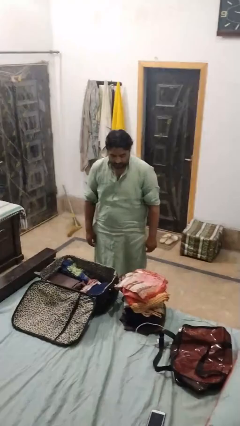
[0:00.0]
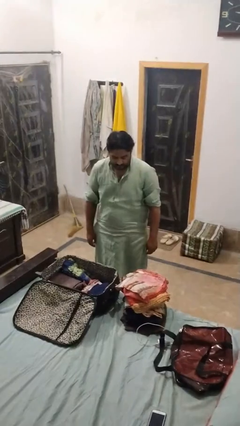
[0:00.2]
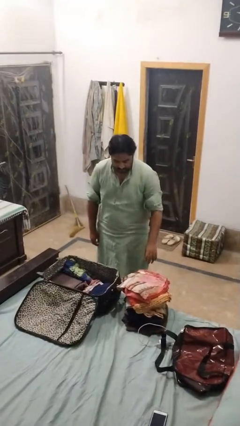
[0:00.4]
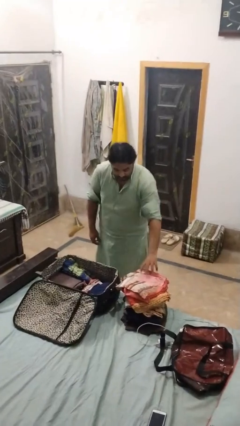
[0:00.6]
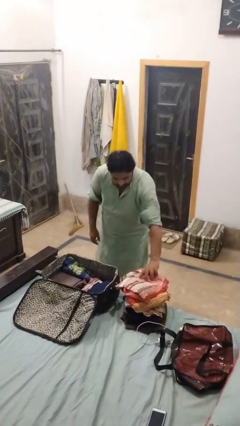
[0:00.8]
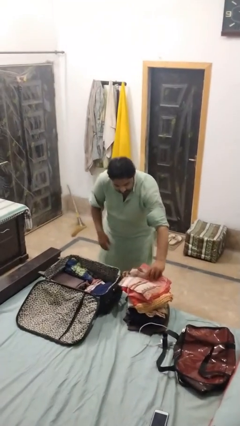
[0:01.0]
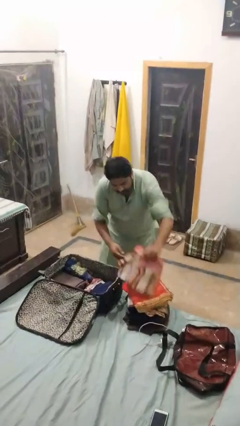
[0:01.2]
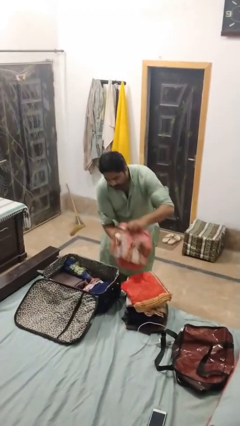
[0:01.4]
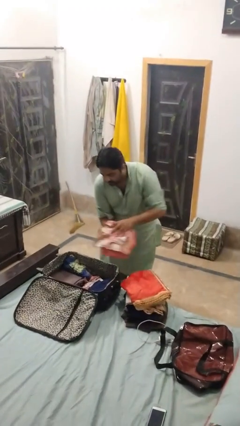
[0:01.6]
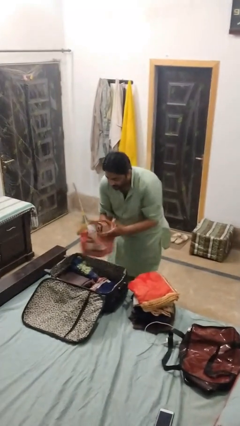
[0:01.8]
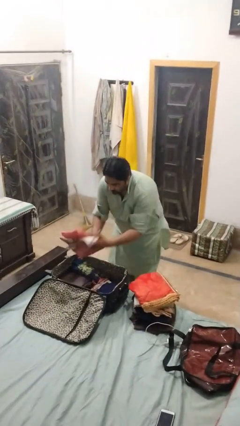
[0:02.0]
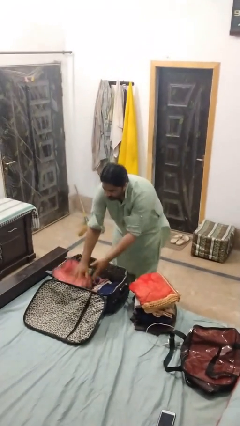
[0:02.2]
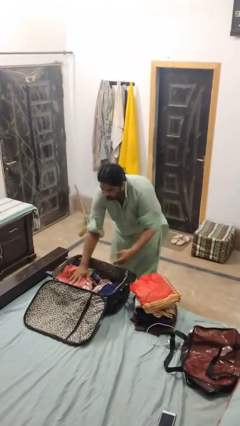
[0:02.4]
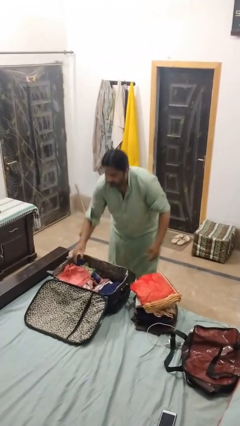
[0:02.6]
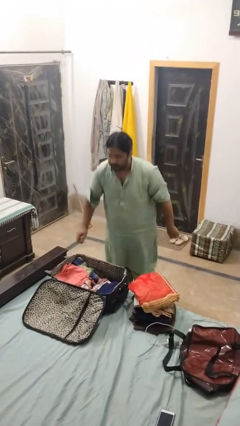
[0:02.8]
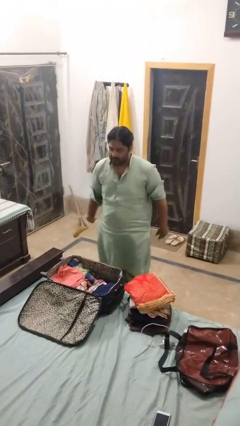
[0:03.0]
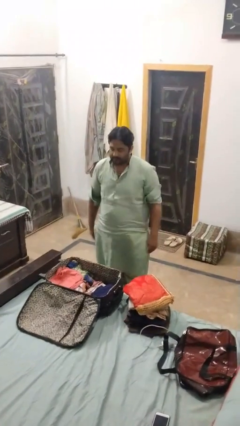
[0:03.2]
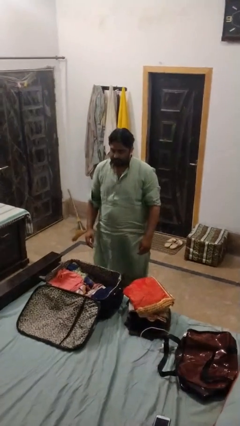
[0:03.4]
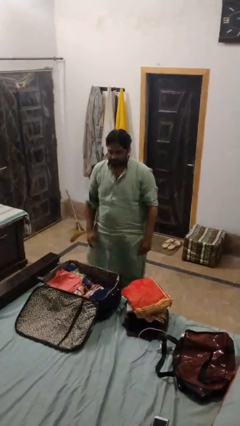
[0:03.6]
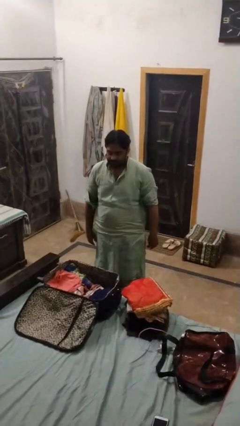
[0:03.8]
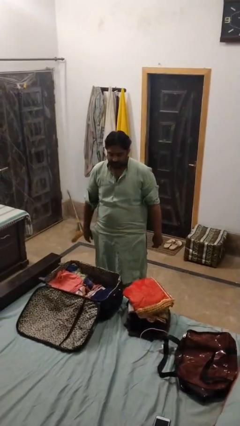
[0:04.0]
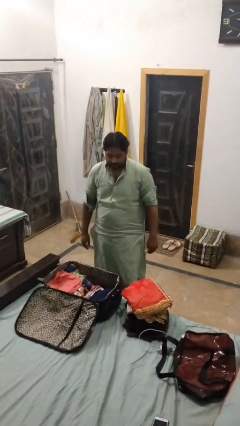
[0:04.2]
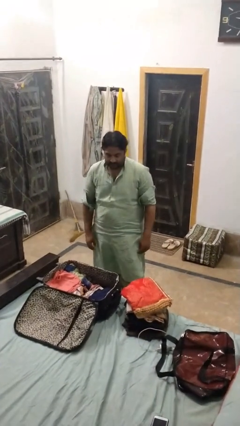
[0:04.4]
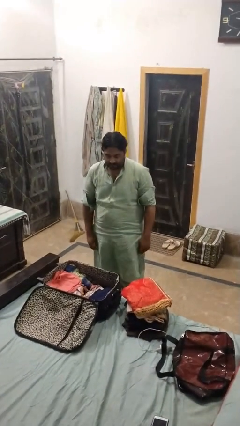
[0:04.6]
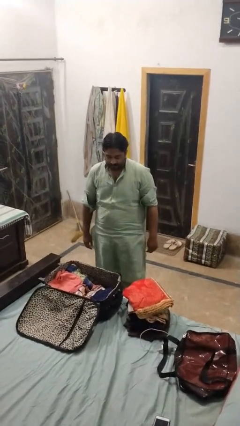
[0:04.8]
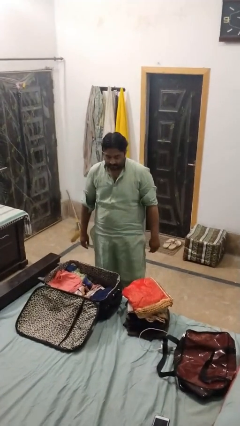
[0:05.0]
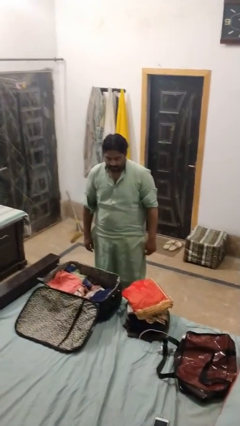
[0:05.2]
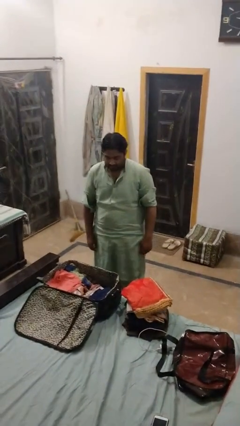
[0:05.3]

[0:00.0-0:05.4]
person loads clothes into suitcase

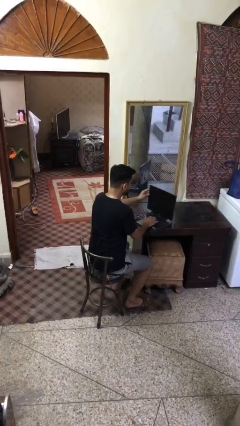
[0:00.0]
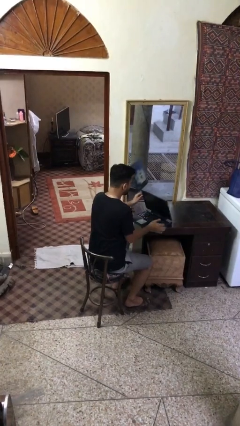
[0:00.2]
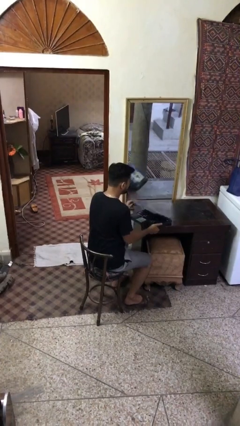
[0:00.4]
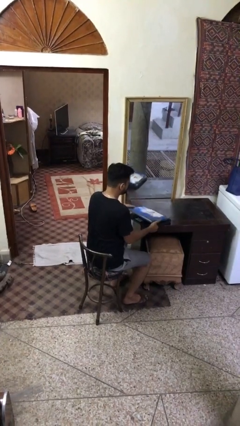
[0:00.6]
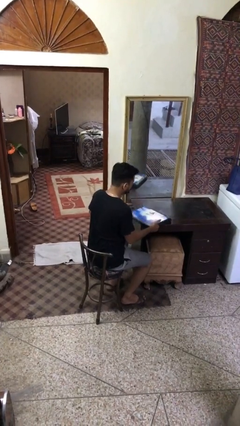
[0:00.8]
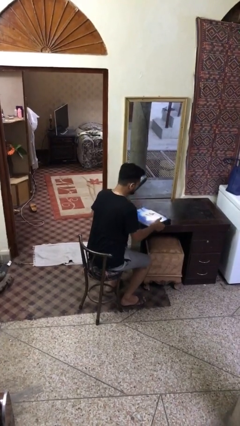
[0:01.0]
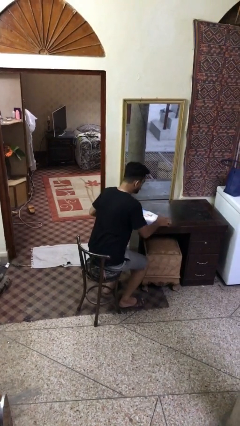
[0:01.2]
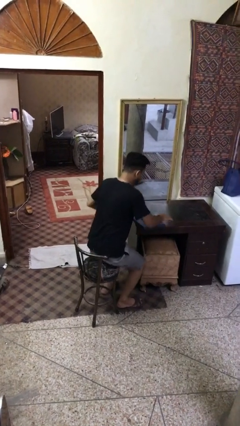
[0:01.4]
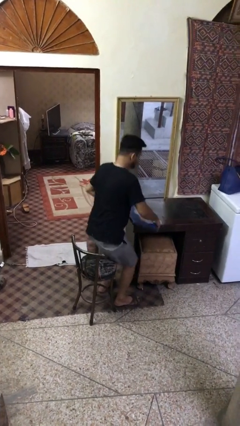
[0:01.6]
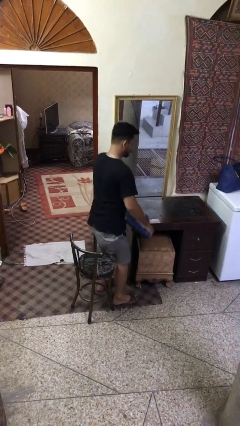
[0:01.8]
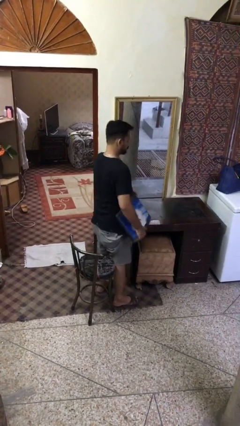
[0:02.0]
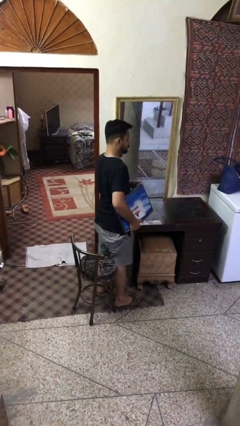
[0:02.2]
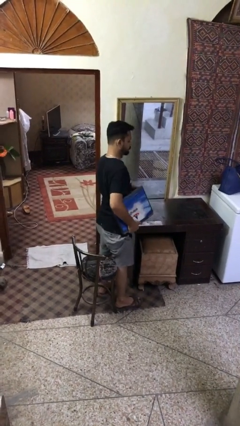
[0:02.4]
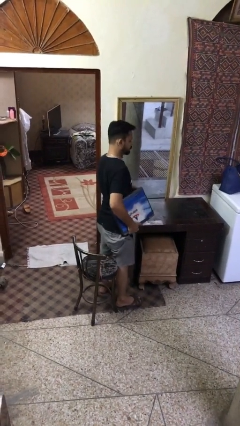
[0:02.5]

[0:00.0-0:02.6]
person stands up

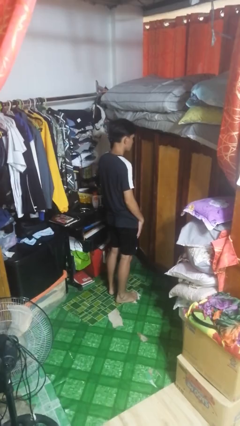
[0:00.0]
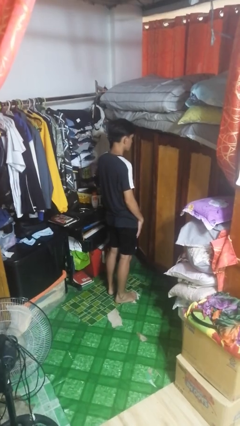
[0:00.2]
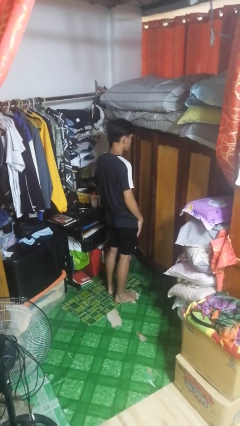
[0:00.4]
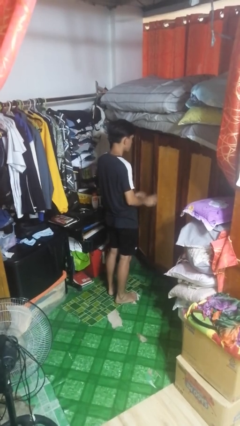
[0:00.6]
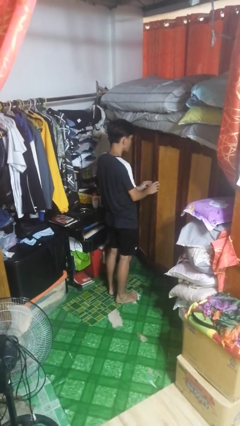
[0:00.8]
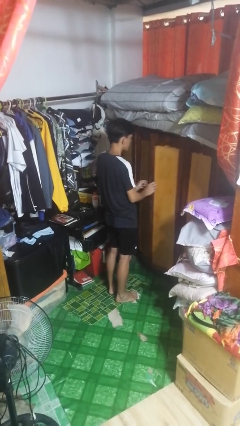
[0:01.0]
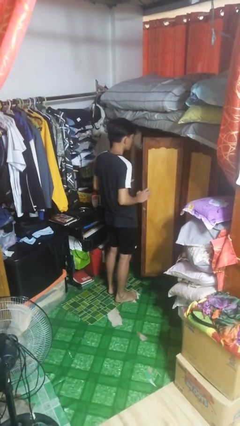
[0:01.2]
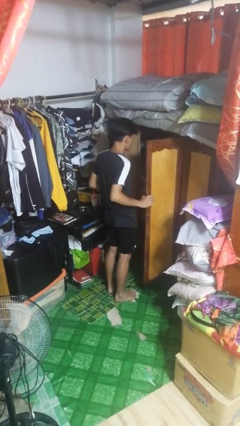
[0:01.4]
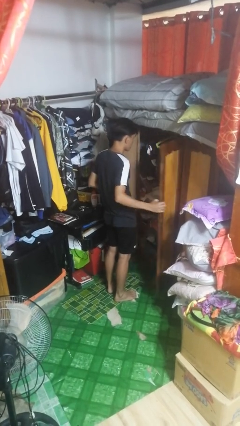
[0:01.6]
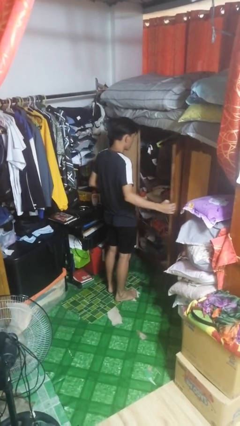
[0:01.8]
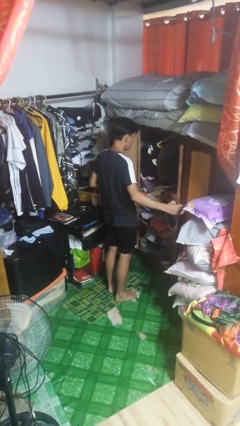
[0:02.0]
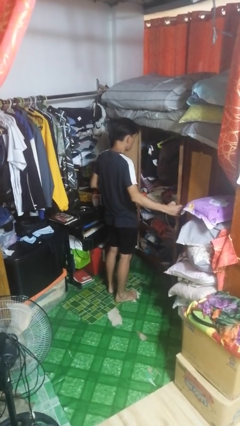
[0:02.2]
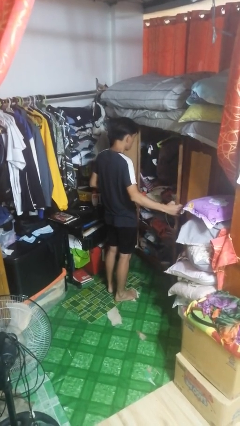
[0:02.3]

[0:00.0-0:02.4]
person opens dresser drawer

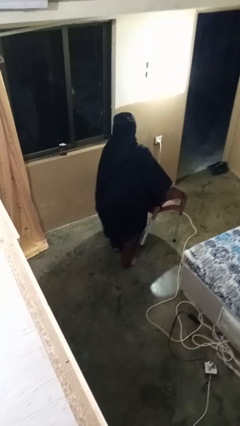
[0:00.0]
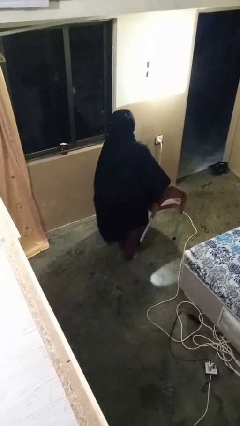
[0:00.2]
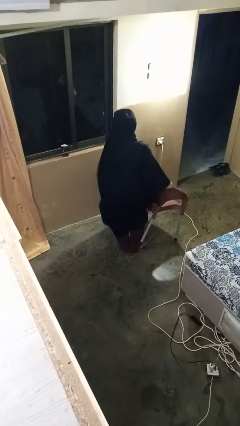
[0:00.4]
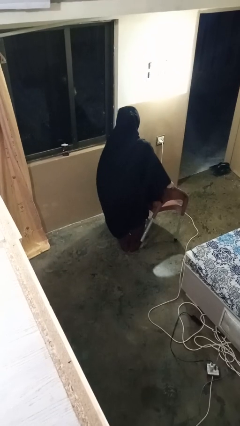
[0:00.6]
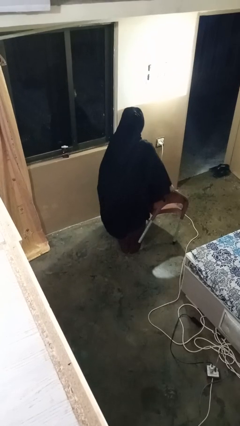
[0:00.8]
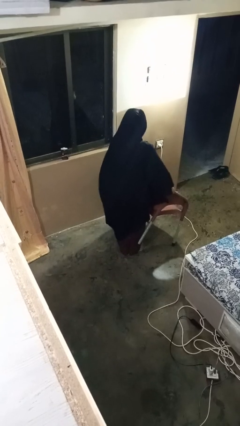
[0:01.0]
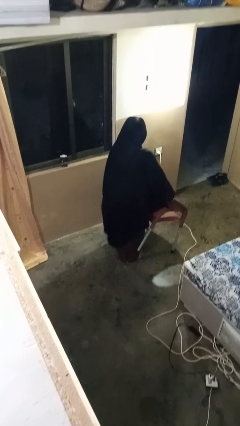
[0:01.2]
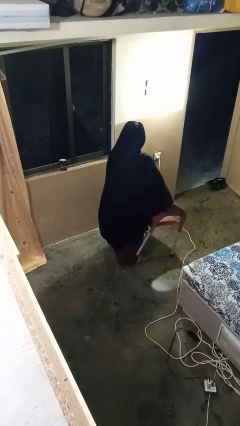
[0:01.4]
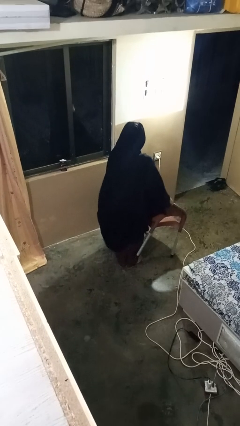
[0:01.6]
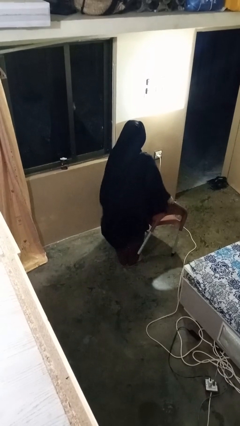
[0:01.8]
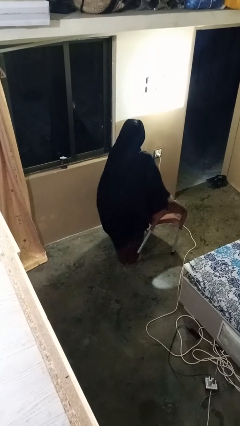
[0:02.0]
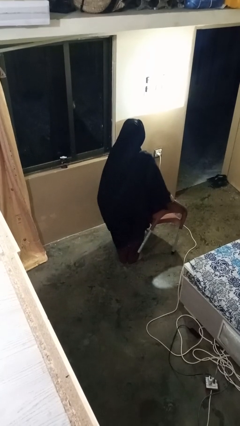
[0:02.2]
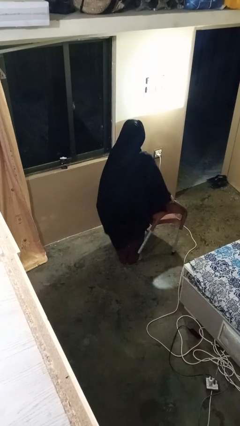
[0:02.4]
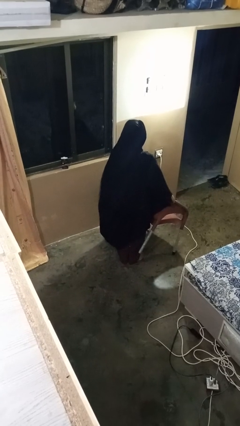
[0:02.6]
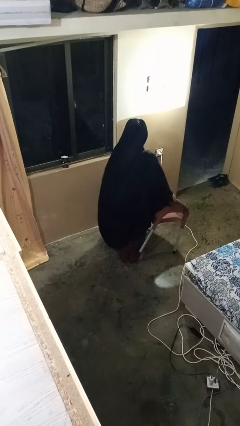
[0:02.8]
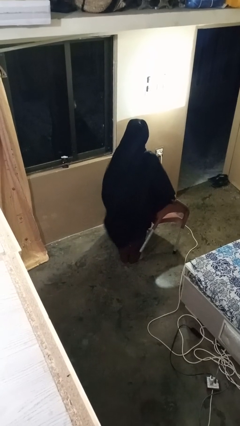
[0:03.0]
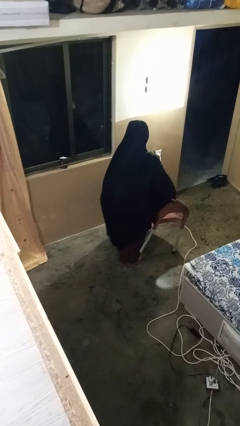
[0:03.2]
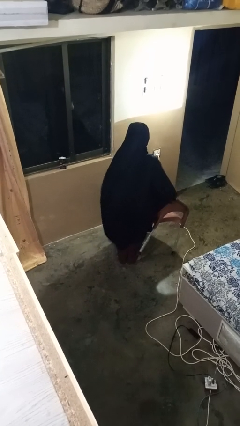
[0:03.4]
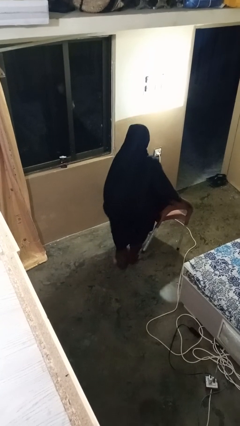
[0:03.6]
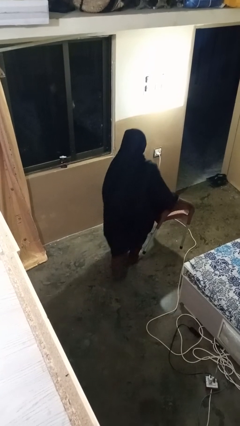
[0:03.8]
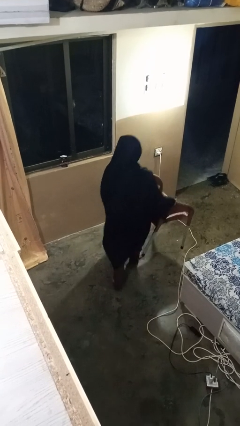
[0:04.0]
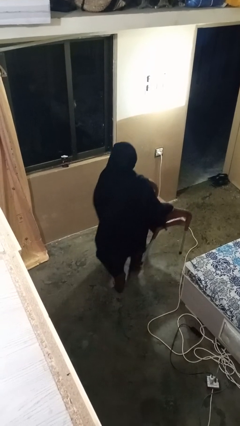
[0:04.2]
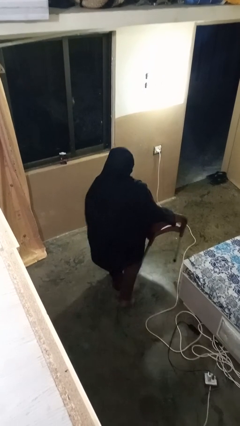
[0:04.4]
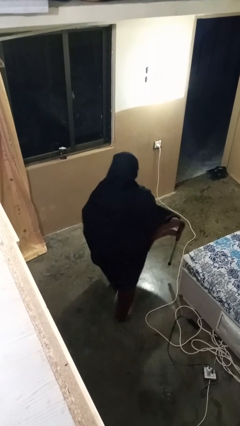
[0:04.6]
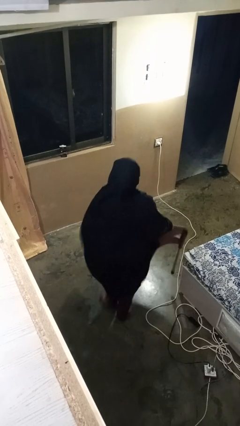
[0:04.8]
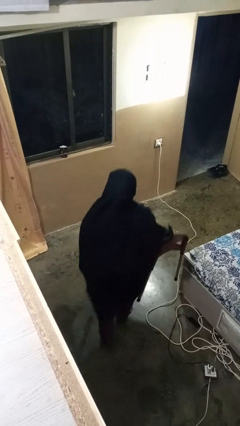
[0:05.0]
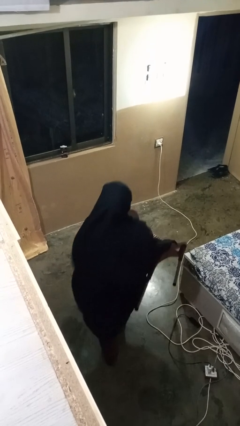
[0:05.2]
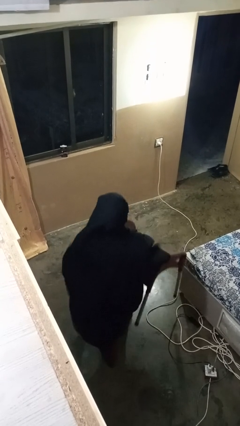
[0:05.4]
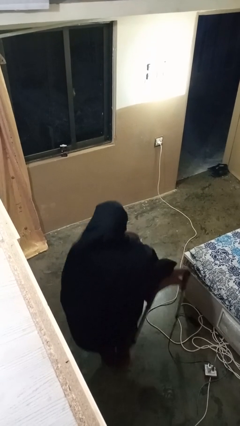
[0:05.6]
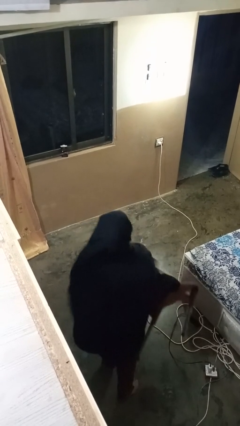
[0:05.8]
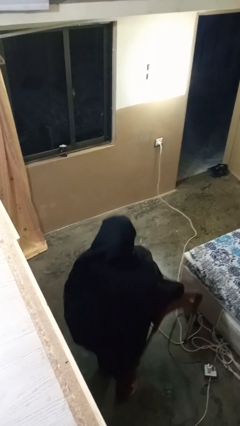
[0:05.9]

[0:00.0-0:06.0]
person carries furniture

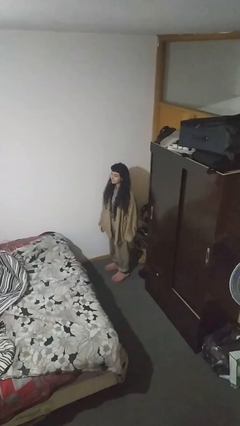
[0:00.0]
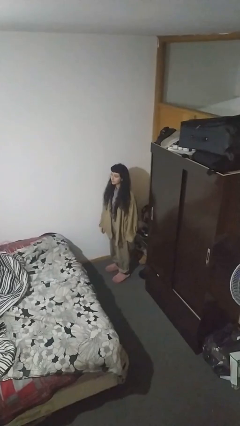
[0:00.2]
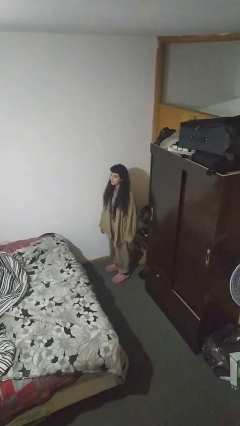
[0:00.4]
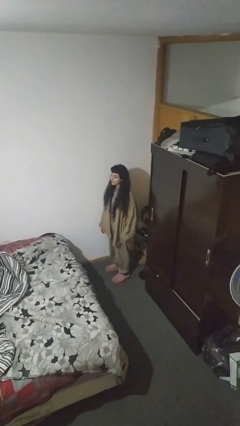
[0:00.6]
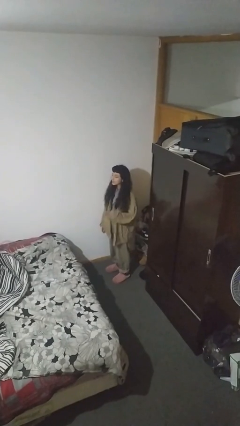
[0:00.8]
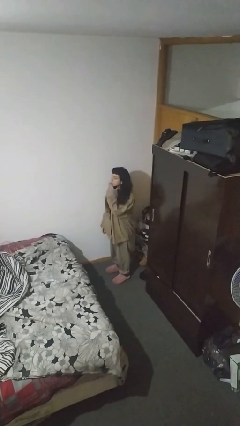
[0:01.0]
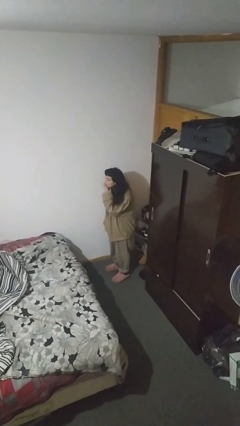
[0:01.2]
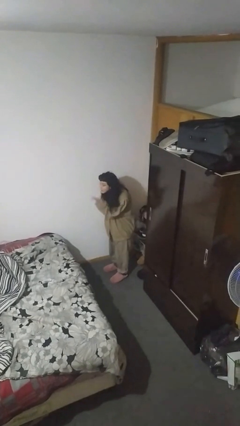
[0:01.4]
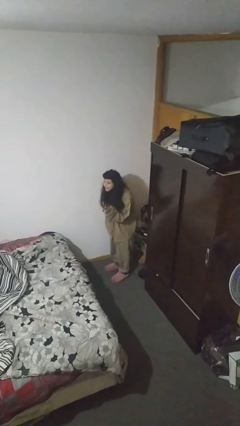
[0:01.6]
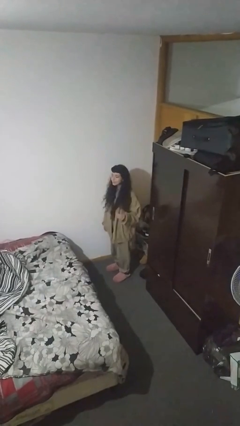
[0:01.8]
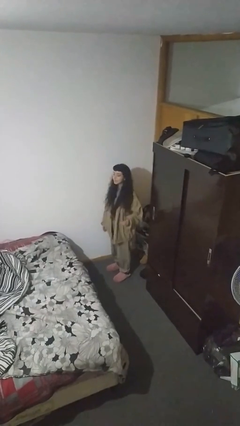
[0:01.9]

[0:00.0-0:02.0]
person gestures blow kiss
